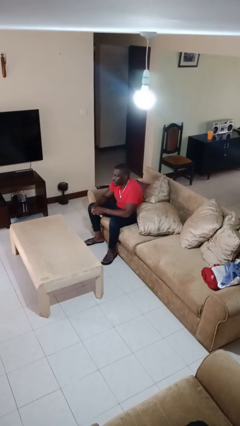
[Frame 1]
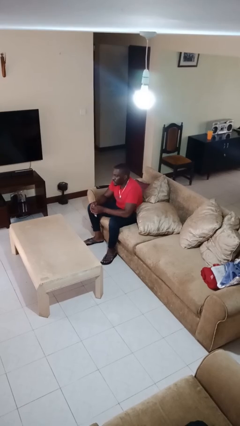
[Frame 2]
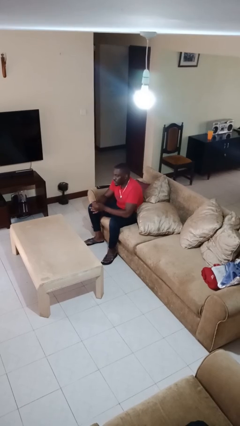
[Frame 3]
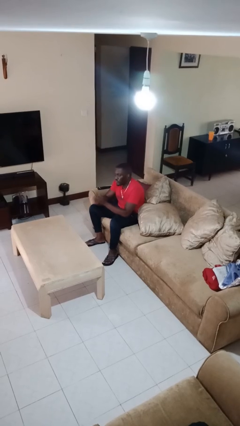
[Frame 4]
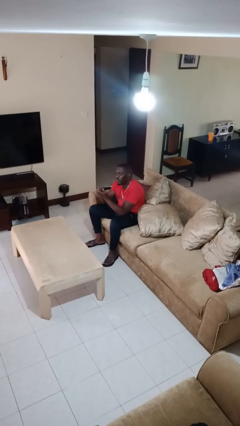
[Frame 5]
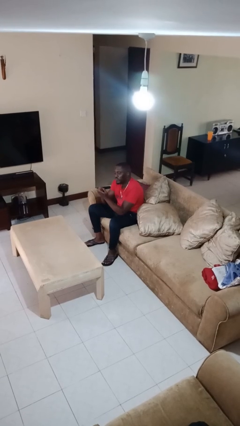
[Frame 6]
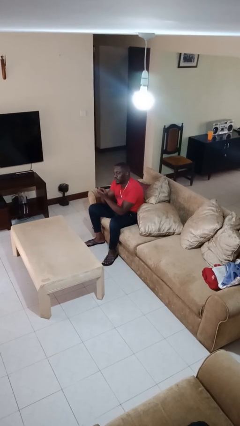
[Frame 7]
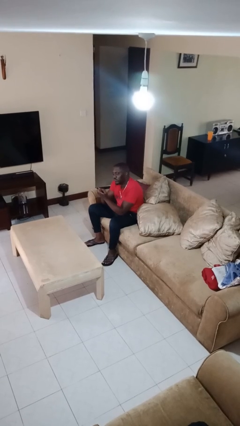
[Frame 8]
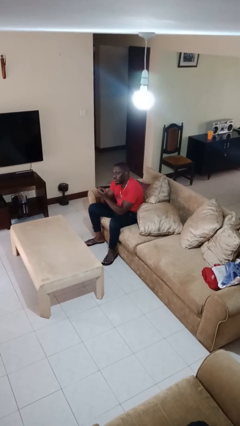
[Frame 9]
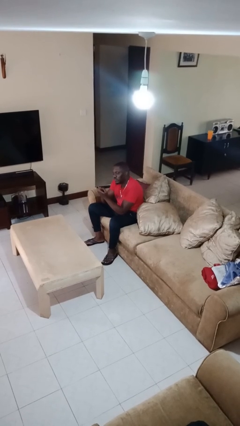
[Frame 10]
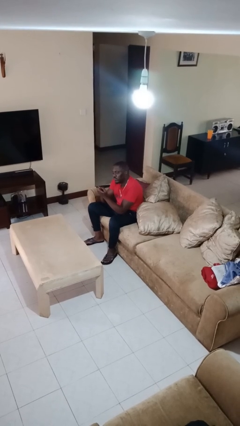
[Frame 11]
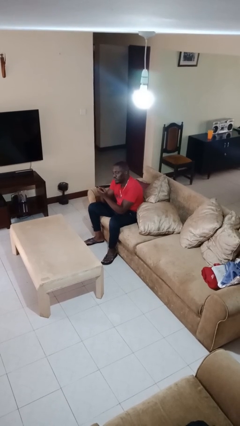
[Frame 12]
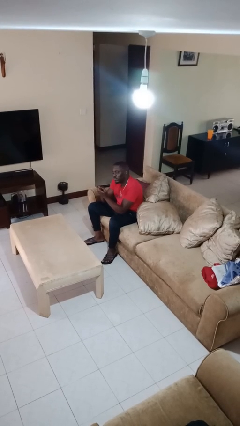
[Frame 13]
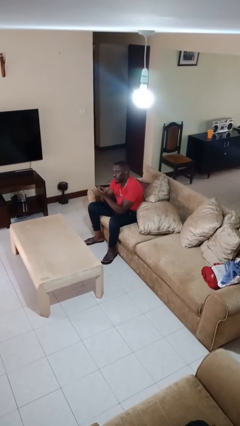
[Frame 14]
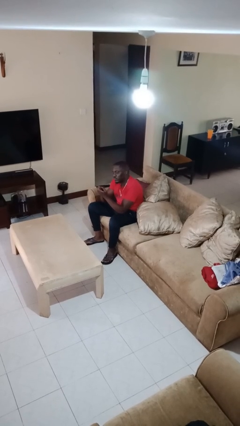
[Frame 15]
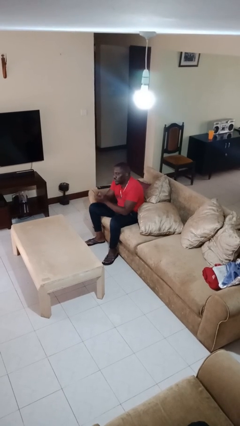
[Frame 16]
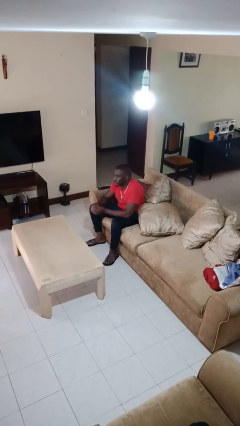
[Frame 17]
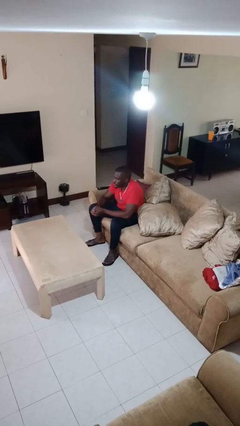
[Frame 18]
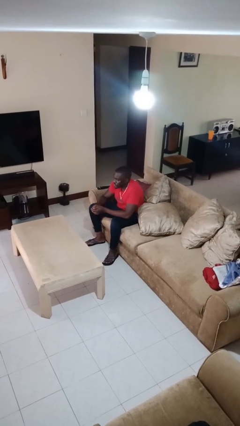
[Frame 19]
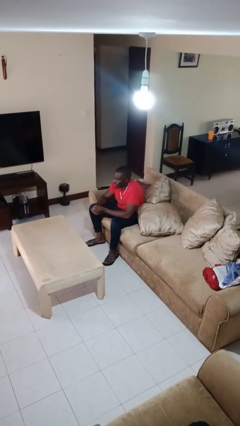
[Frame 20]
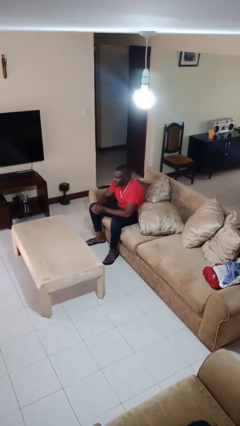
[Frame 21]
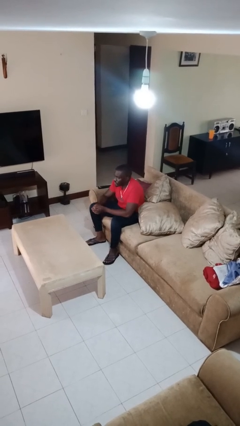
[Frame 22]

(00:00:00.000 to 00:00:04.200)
person clips fingernails

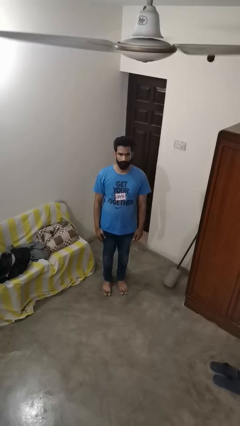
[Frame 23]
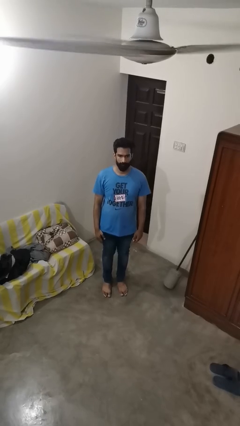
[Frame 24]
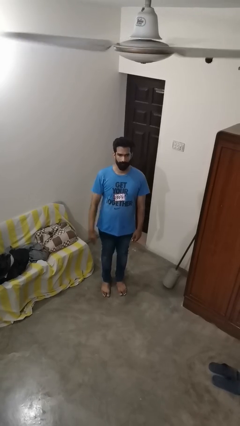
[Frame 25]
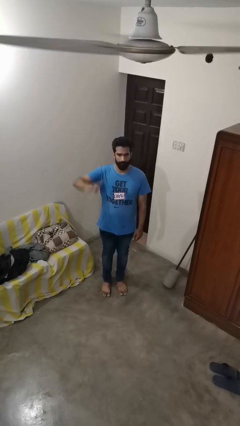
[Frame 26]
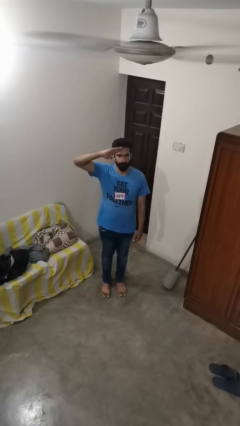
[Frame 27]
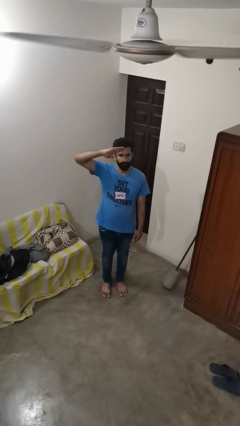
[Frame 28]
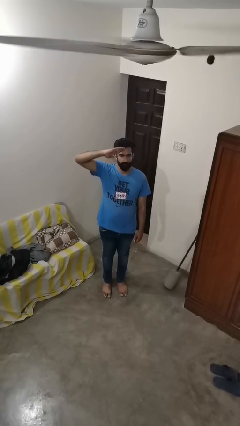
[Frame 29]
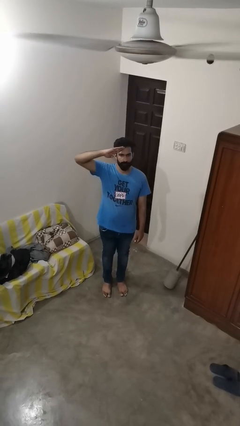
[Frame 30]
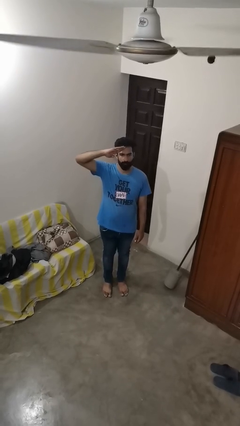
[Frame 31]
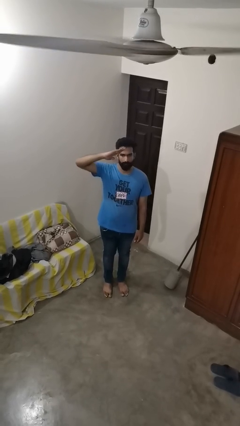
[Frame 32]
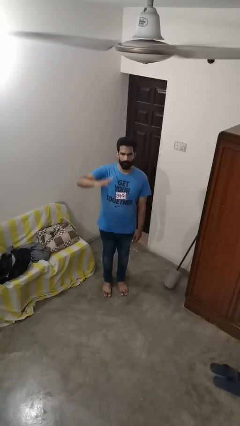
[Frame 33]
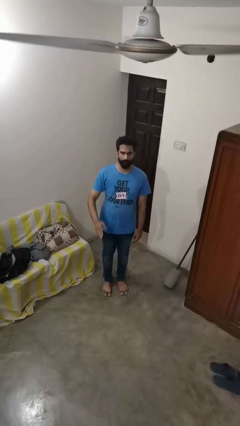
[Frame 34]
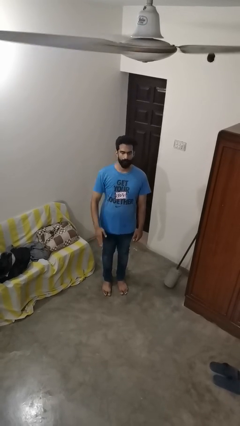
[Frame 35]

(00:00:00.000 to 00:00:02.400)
person salutes

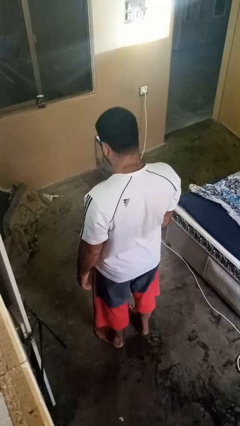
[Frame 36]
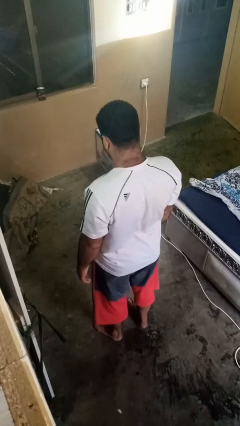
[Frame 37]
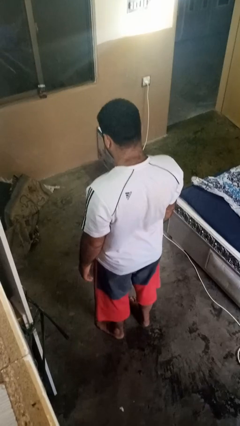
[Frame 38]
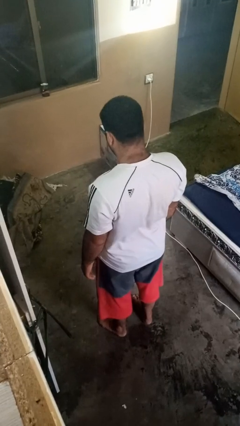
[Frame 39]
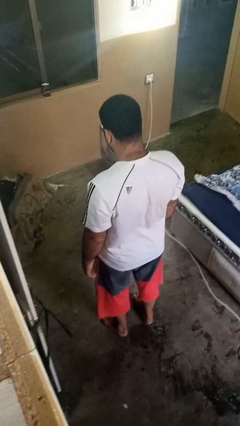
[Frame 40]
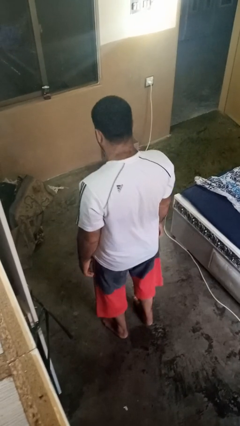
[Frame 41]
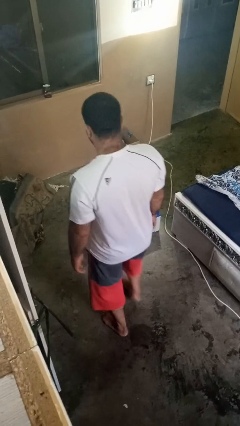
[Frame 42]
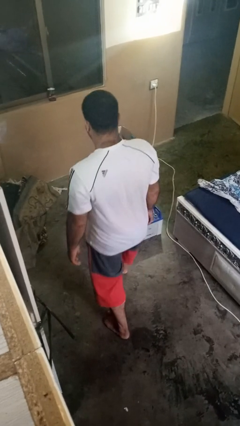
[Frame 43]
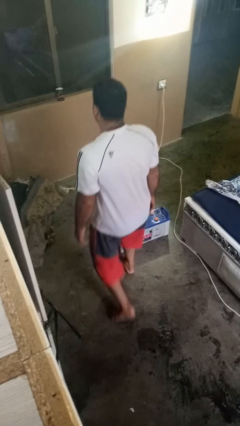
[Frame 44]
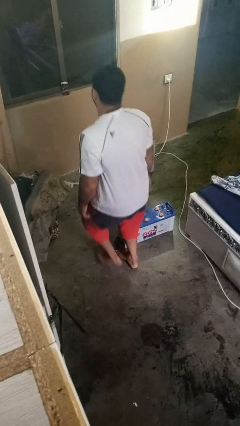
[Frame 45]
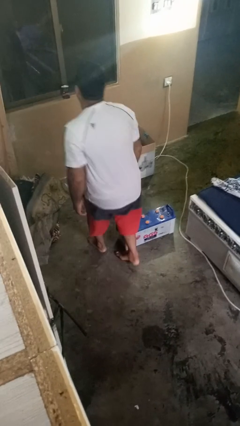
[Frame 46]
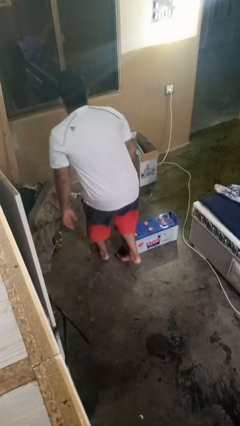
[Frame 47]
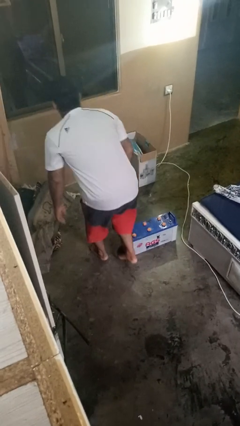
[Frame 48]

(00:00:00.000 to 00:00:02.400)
person trips on object on floor

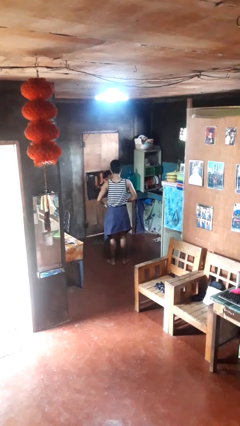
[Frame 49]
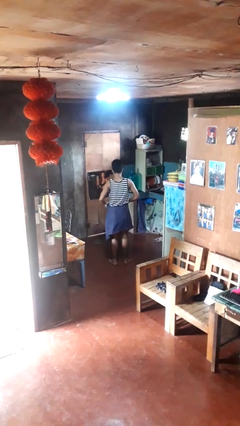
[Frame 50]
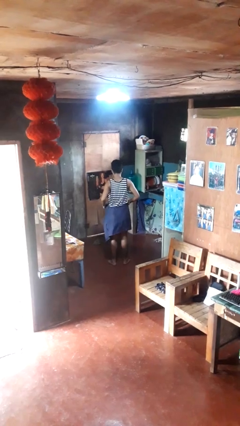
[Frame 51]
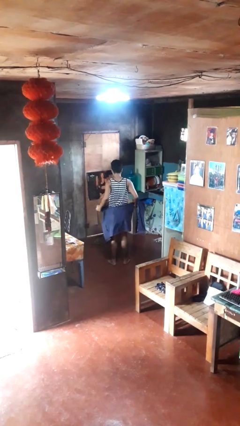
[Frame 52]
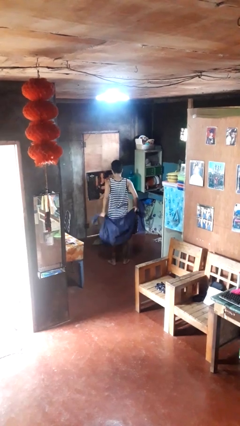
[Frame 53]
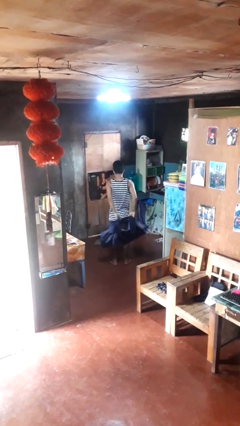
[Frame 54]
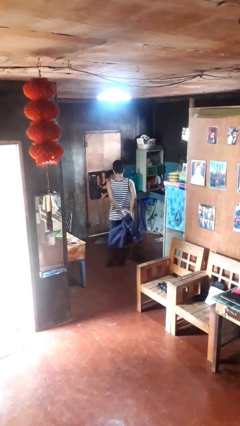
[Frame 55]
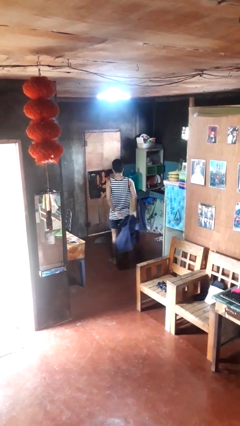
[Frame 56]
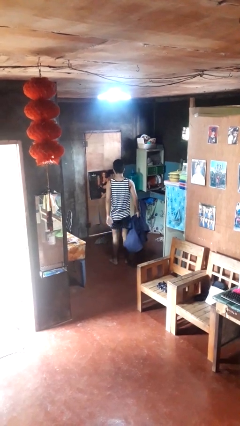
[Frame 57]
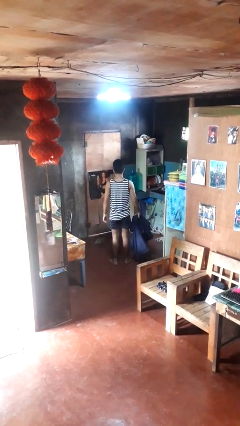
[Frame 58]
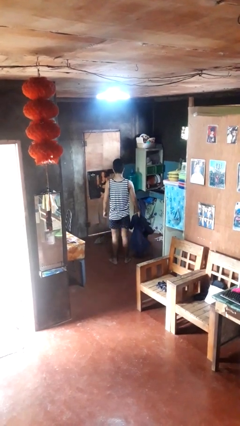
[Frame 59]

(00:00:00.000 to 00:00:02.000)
person unties jacket around waist

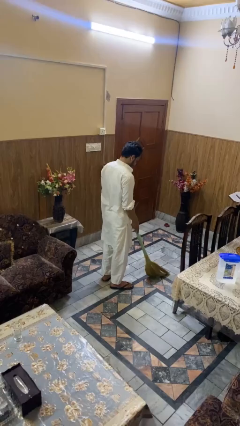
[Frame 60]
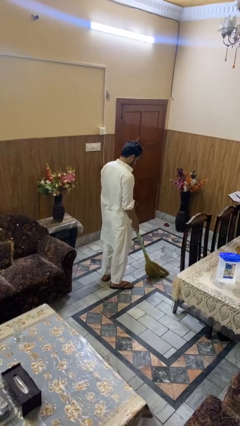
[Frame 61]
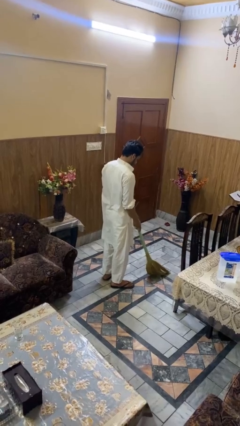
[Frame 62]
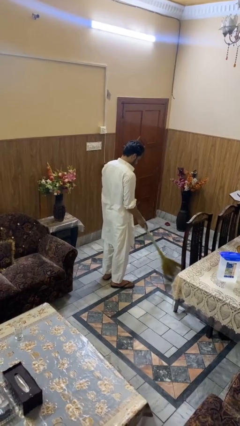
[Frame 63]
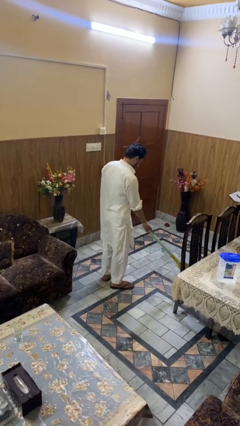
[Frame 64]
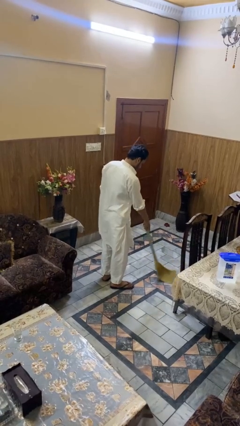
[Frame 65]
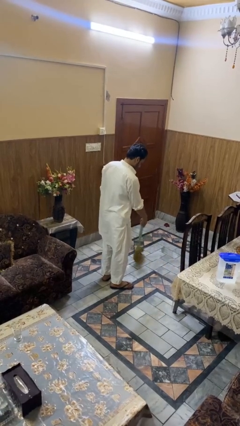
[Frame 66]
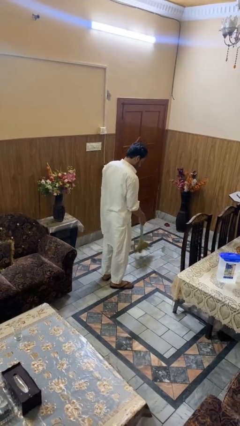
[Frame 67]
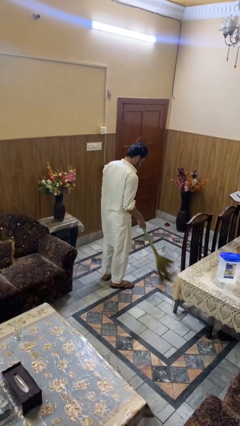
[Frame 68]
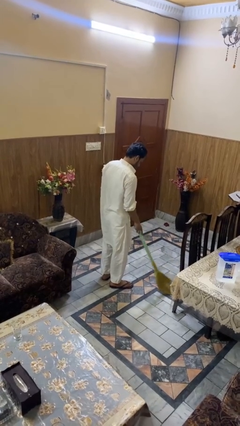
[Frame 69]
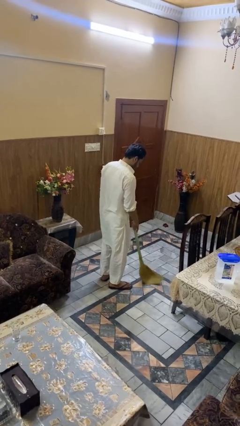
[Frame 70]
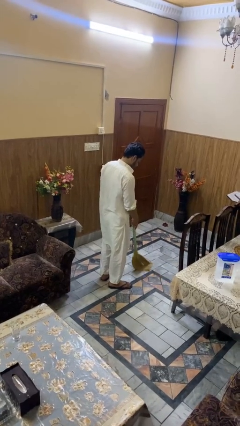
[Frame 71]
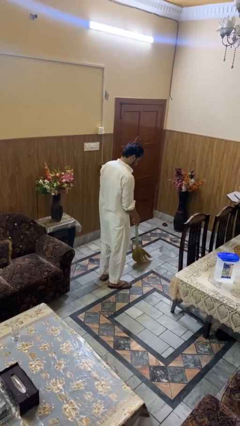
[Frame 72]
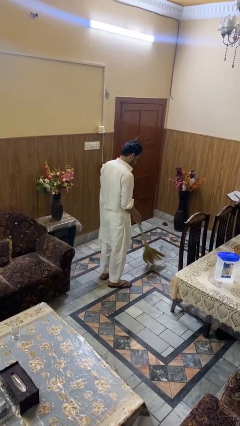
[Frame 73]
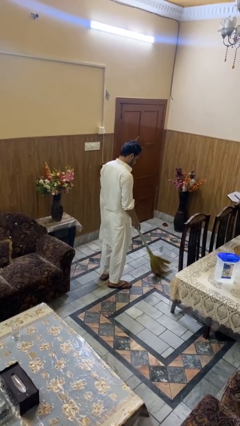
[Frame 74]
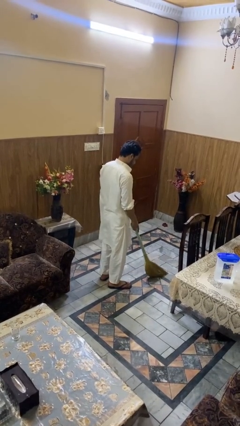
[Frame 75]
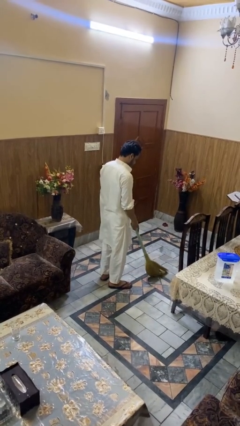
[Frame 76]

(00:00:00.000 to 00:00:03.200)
person sweeps floor

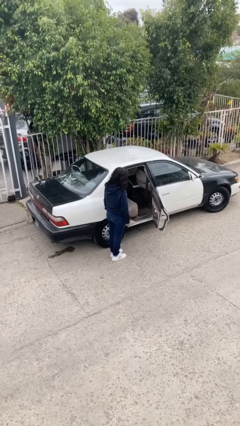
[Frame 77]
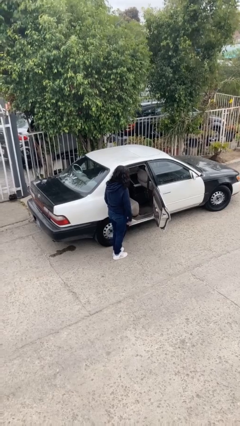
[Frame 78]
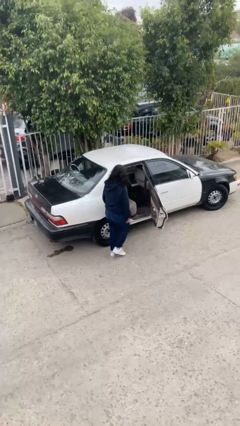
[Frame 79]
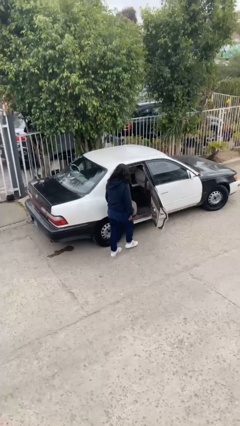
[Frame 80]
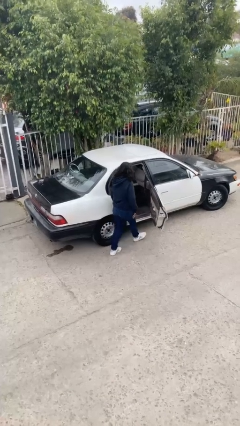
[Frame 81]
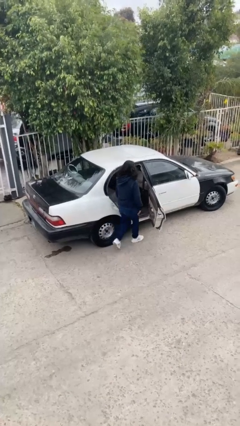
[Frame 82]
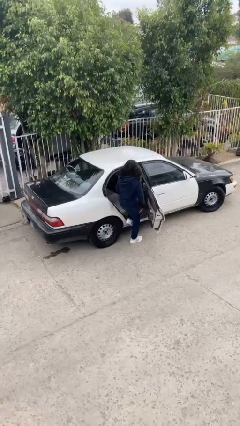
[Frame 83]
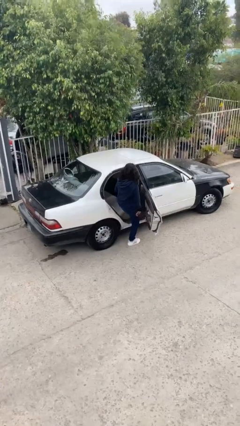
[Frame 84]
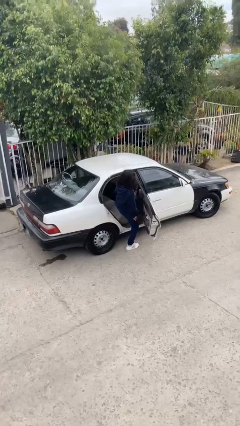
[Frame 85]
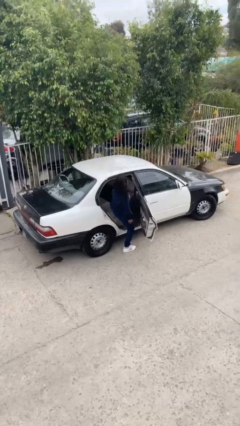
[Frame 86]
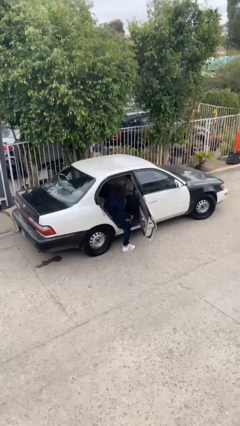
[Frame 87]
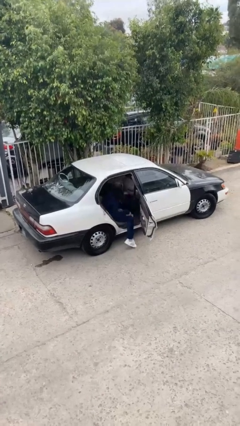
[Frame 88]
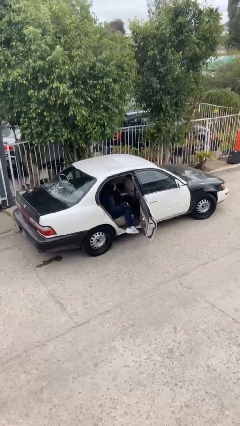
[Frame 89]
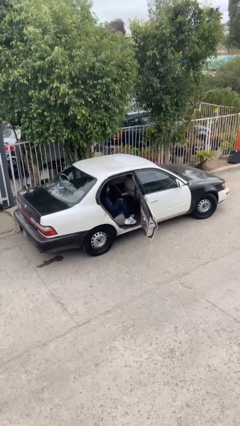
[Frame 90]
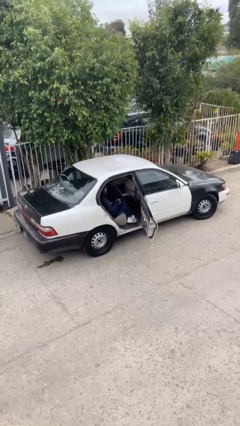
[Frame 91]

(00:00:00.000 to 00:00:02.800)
person enters car
